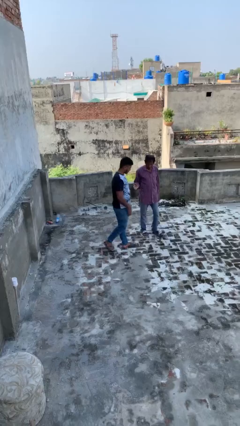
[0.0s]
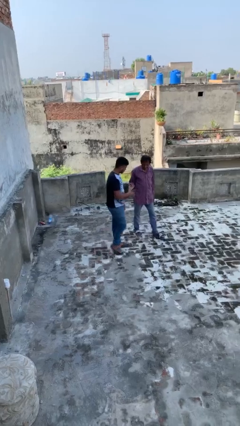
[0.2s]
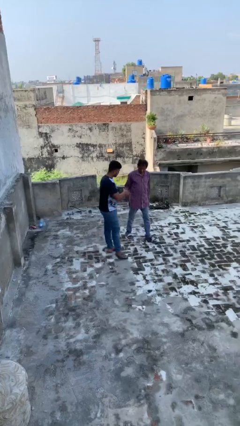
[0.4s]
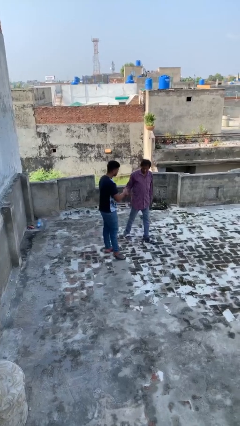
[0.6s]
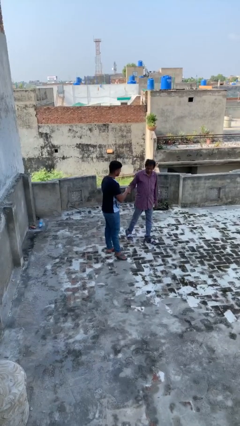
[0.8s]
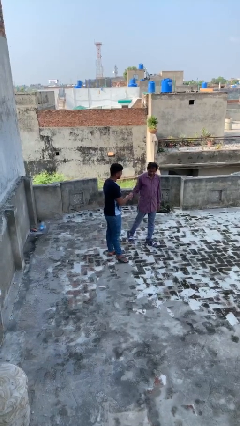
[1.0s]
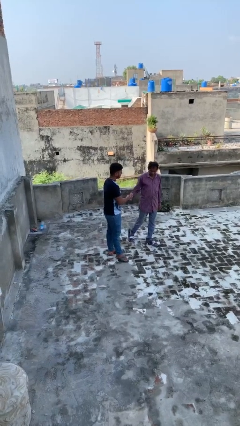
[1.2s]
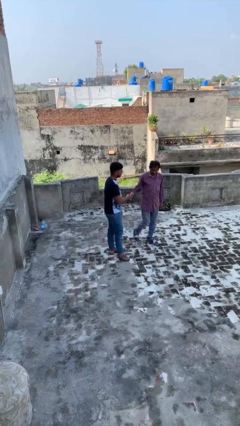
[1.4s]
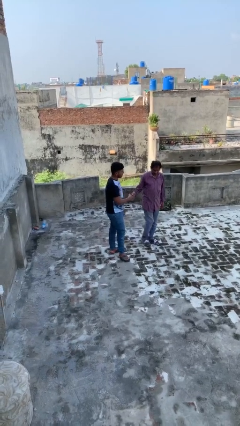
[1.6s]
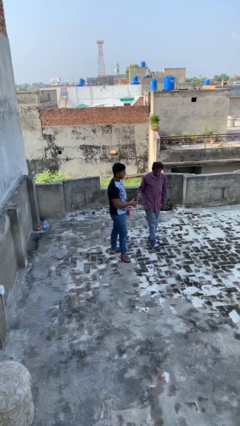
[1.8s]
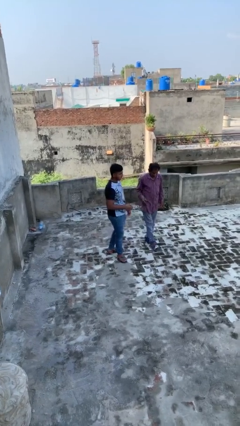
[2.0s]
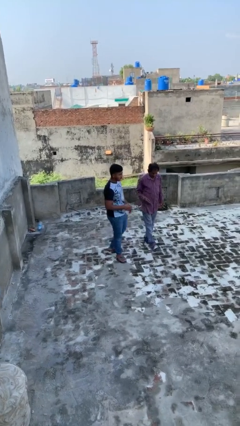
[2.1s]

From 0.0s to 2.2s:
person shakes hand

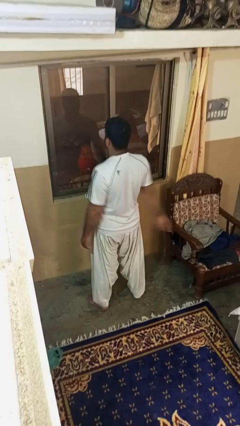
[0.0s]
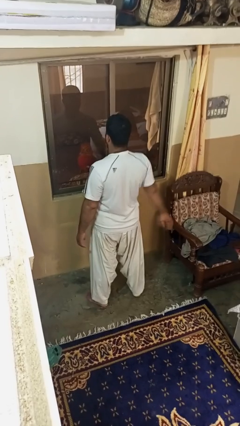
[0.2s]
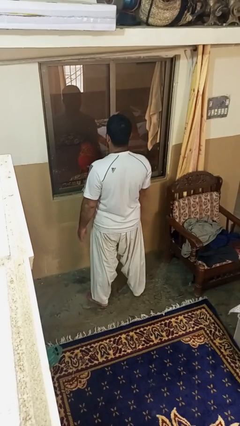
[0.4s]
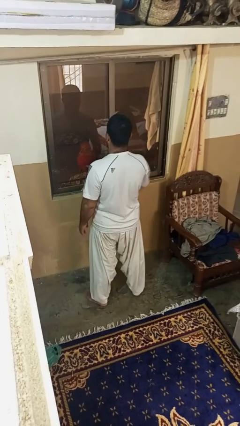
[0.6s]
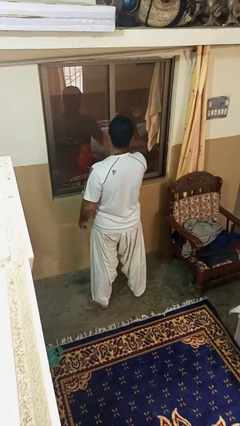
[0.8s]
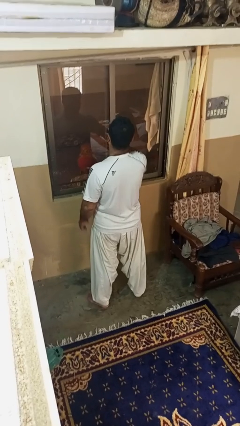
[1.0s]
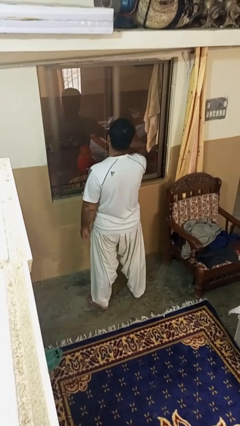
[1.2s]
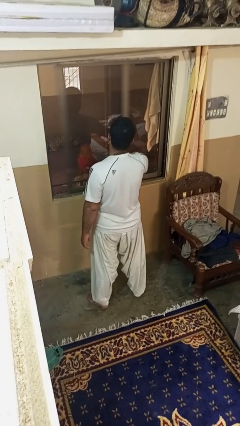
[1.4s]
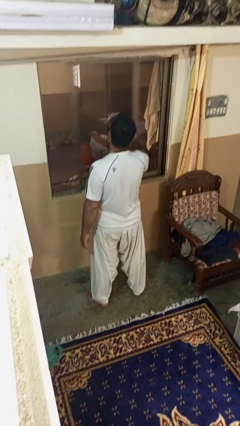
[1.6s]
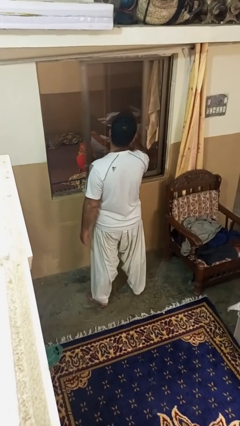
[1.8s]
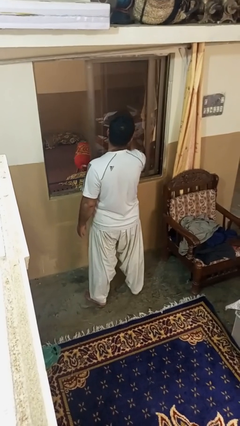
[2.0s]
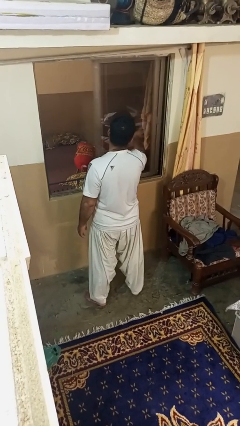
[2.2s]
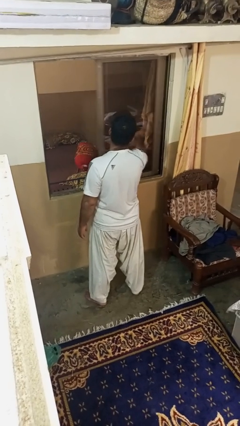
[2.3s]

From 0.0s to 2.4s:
person opens home window

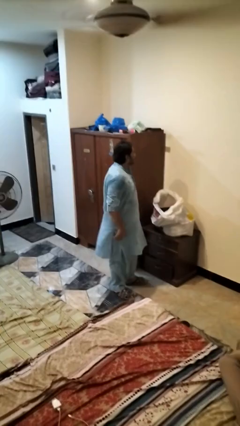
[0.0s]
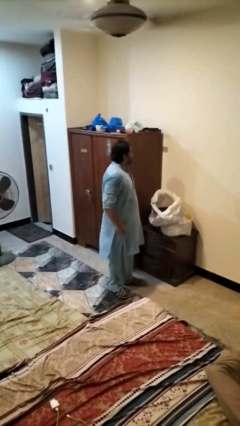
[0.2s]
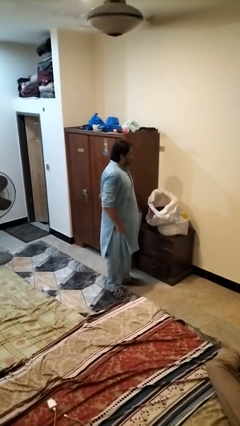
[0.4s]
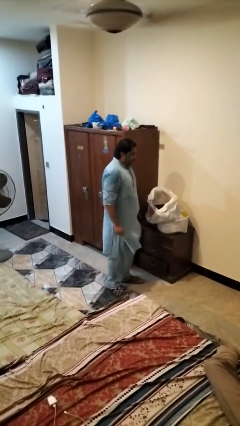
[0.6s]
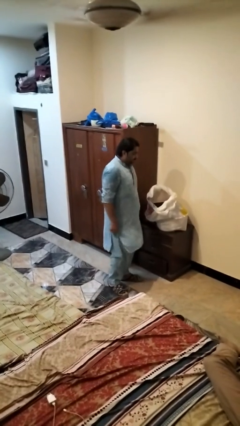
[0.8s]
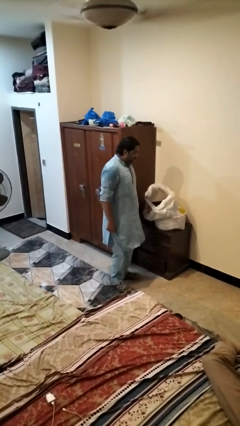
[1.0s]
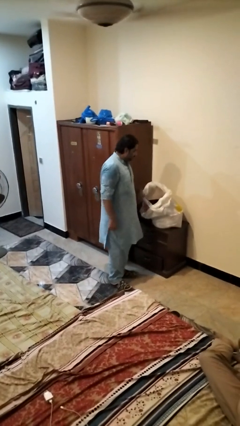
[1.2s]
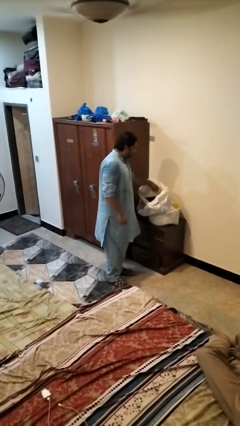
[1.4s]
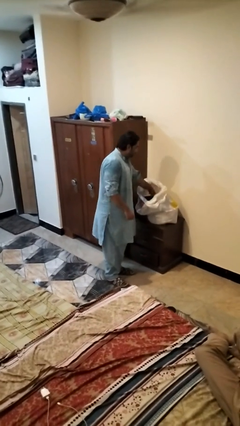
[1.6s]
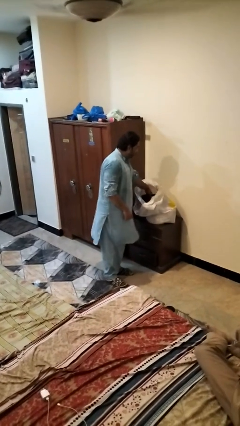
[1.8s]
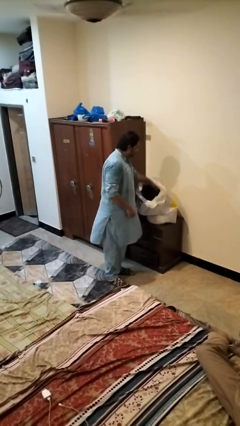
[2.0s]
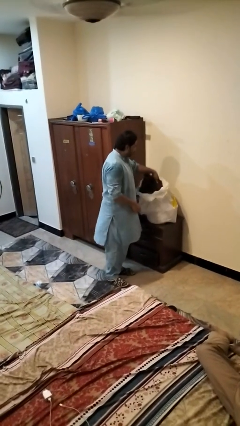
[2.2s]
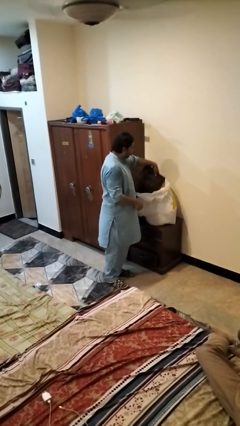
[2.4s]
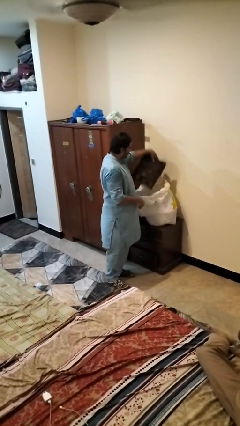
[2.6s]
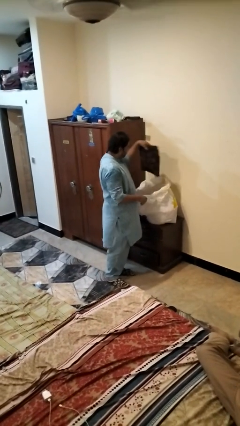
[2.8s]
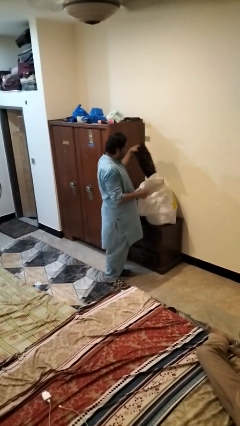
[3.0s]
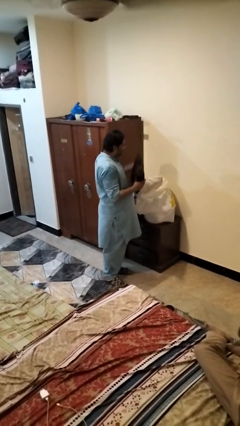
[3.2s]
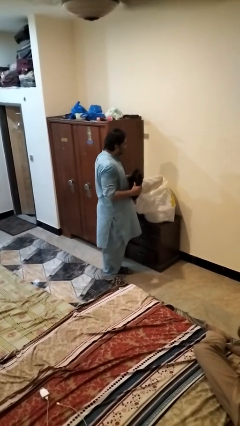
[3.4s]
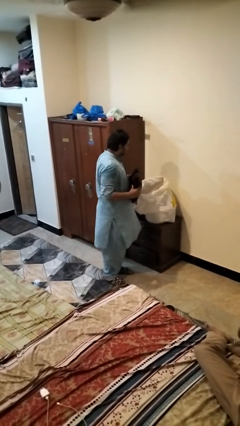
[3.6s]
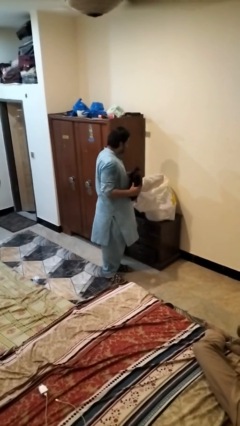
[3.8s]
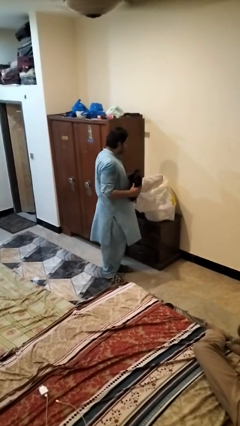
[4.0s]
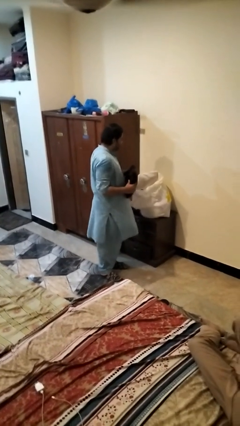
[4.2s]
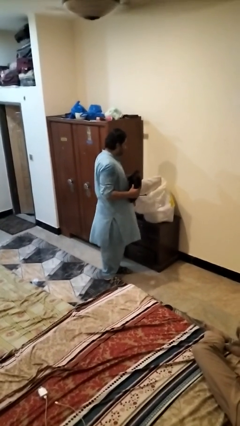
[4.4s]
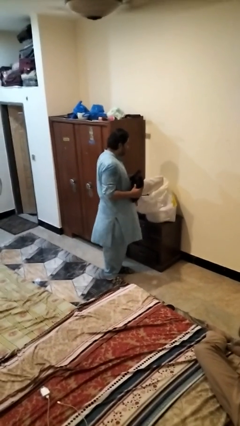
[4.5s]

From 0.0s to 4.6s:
person takes object from bag

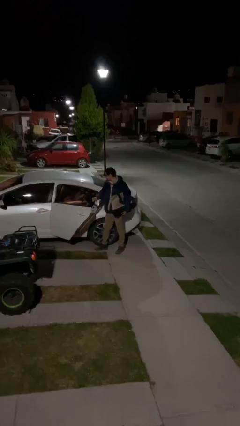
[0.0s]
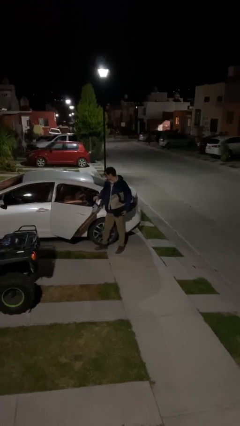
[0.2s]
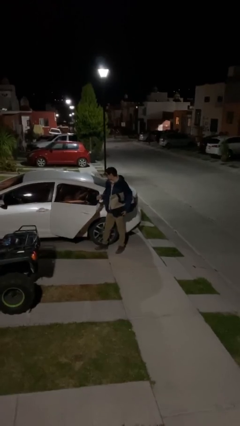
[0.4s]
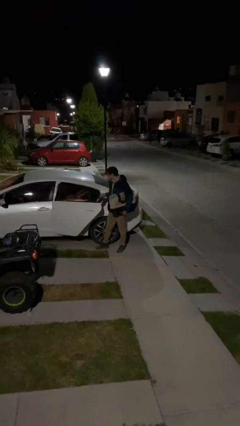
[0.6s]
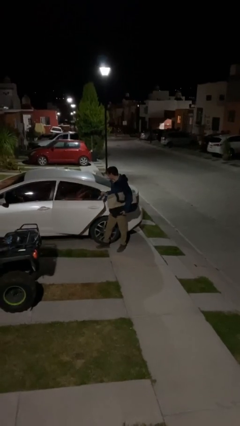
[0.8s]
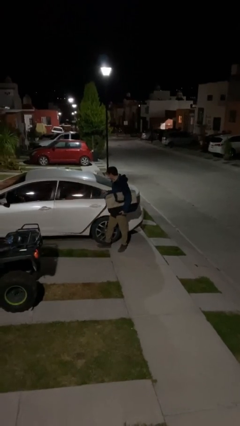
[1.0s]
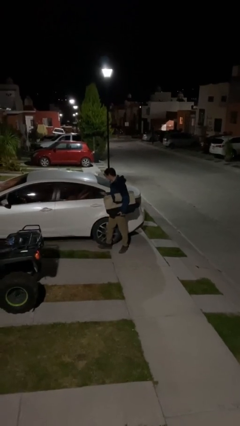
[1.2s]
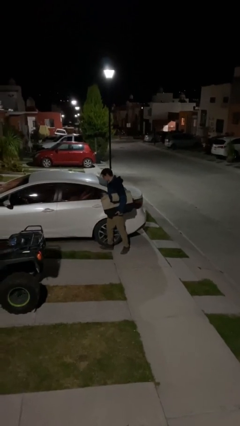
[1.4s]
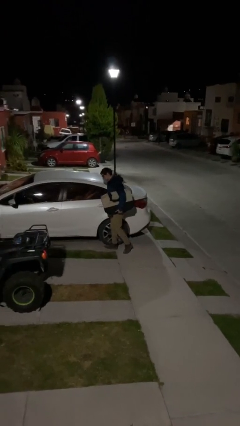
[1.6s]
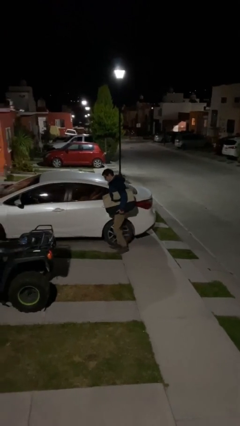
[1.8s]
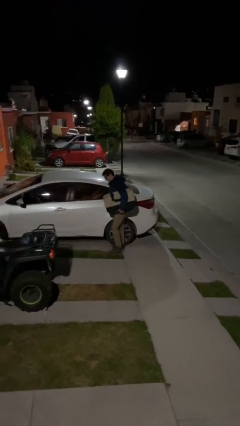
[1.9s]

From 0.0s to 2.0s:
person closes car door

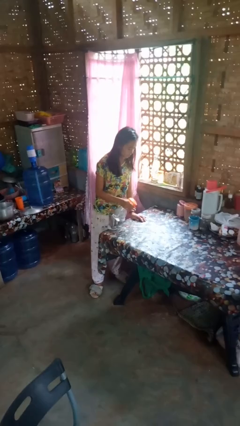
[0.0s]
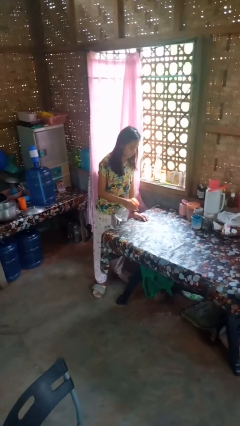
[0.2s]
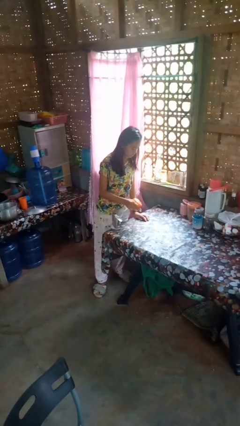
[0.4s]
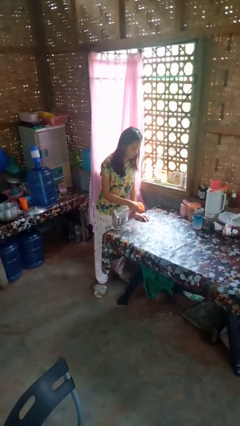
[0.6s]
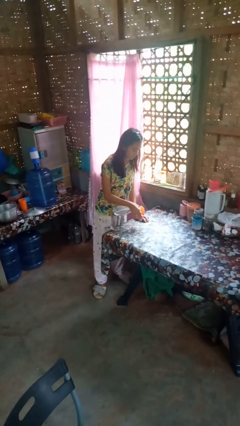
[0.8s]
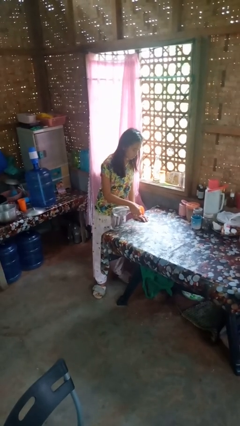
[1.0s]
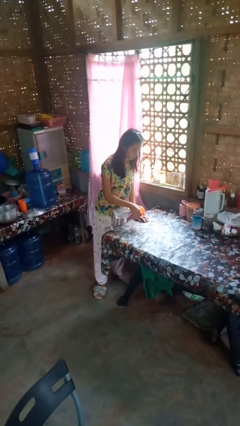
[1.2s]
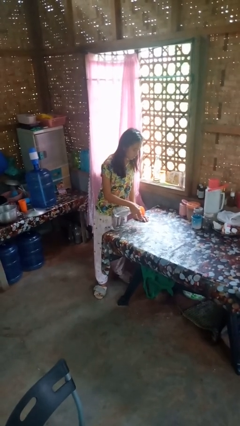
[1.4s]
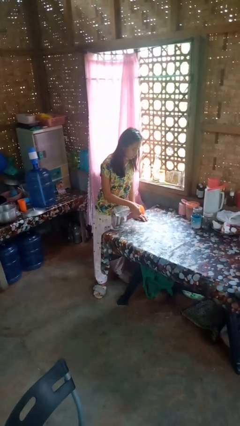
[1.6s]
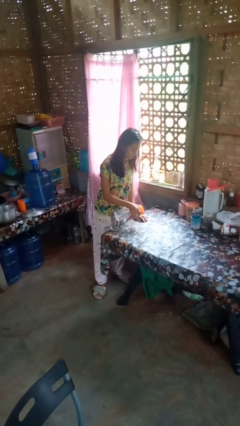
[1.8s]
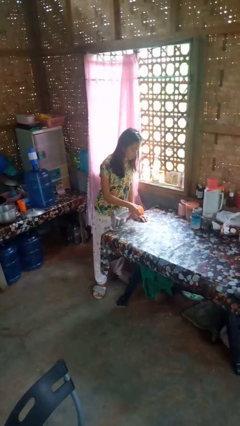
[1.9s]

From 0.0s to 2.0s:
person sprays from bottle

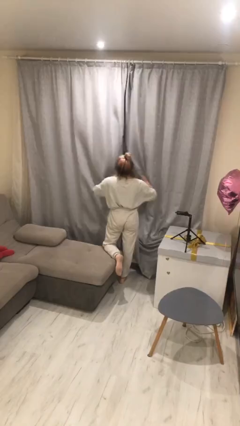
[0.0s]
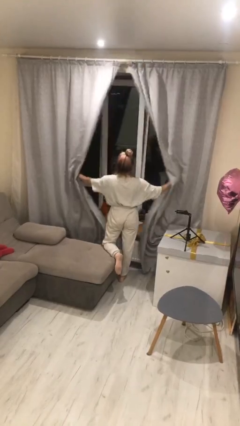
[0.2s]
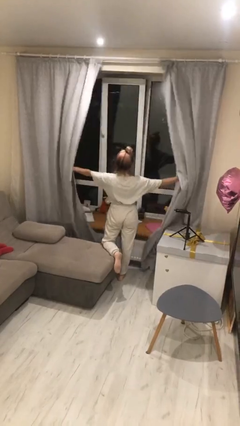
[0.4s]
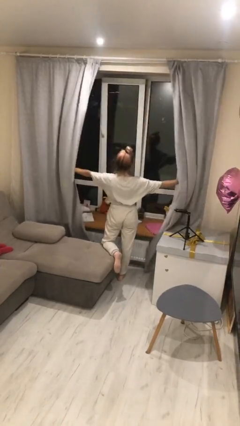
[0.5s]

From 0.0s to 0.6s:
person opens curtains

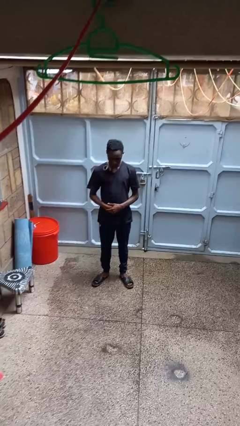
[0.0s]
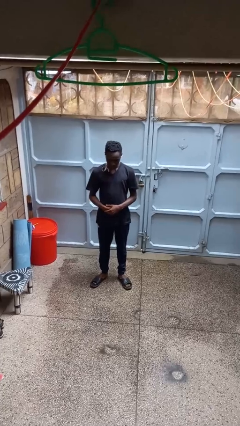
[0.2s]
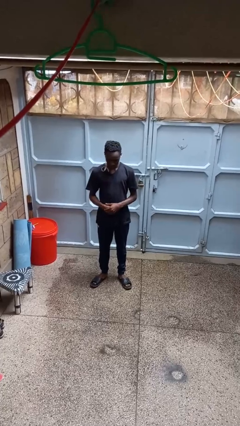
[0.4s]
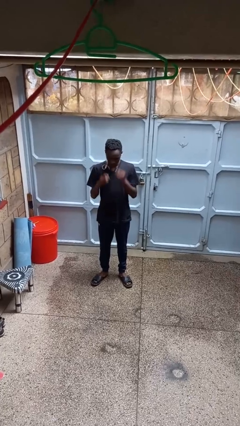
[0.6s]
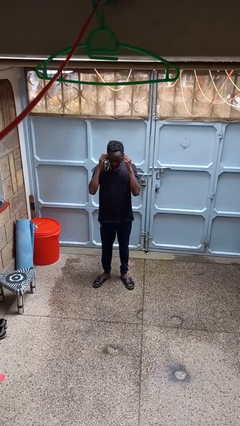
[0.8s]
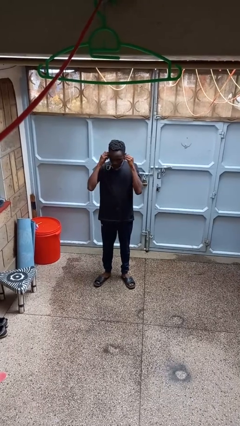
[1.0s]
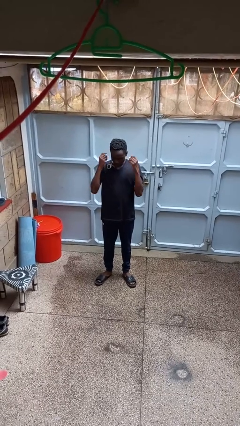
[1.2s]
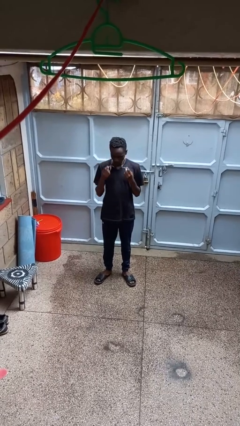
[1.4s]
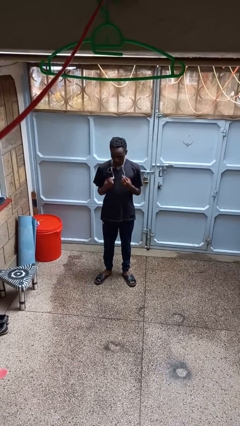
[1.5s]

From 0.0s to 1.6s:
person takes off headphones

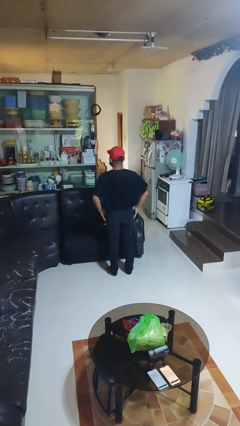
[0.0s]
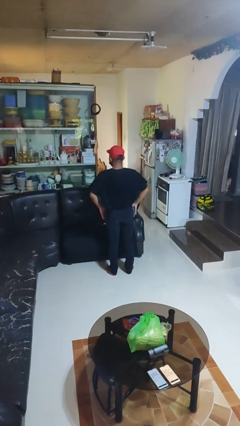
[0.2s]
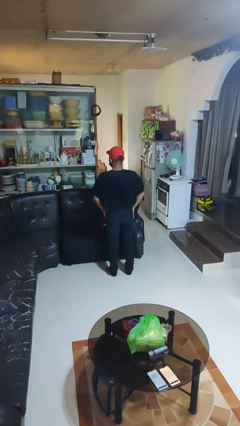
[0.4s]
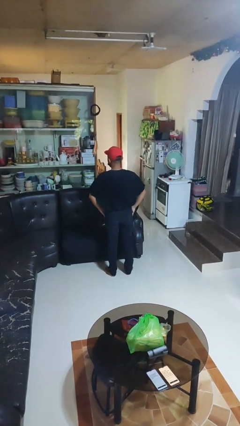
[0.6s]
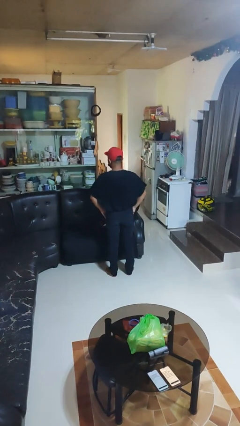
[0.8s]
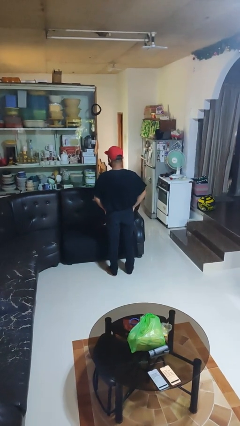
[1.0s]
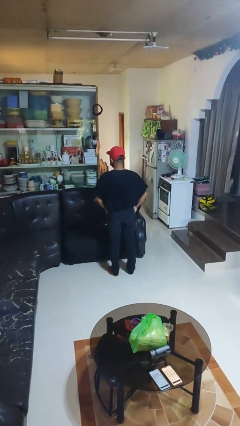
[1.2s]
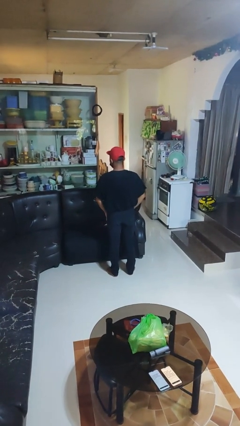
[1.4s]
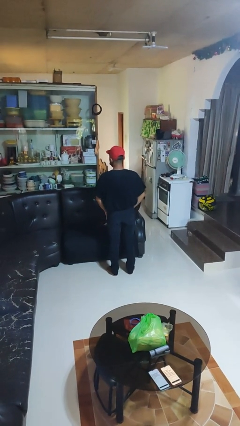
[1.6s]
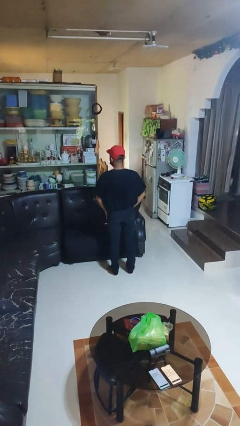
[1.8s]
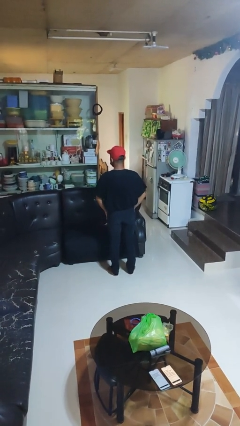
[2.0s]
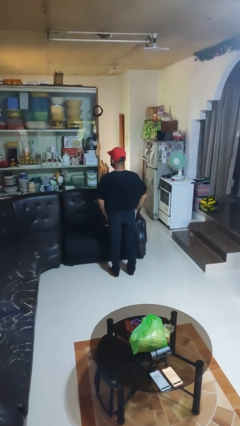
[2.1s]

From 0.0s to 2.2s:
person puts on shirt
